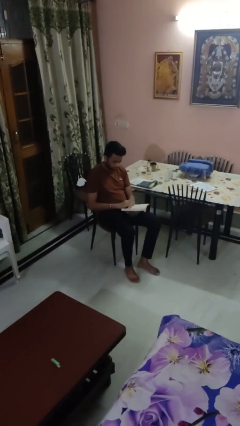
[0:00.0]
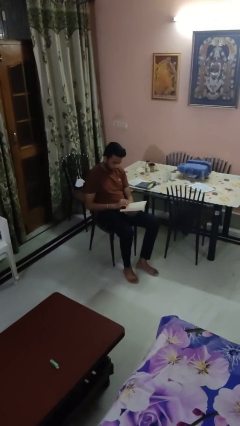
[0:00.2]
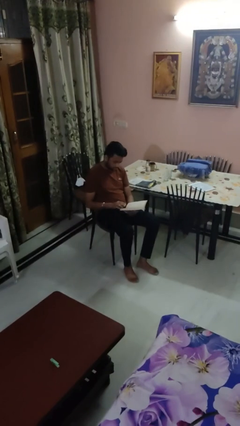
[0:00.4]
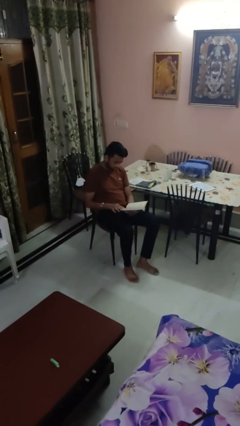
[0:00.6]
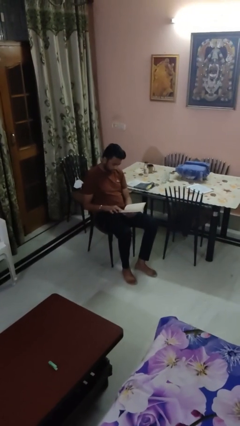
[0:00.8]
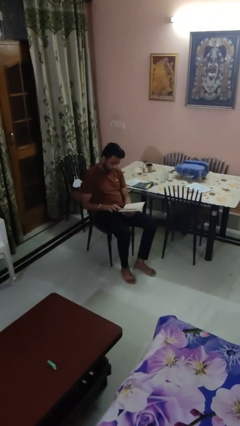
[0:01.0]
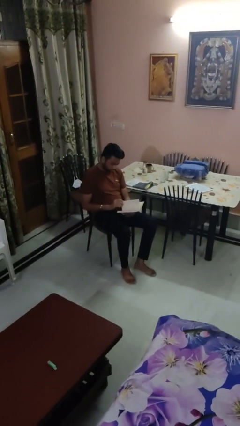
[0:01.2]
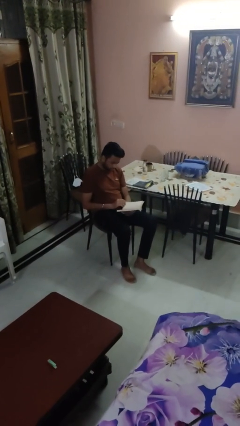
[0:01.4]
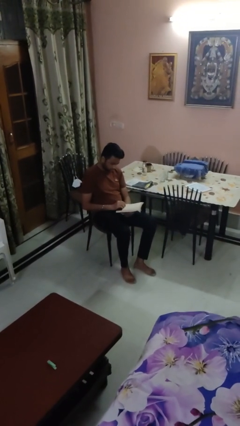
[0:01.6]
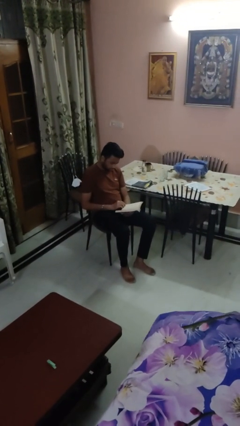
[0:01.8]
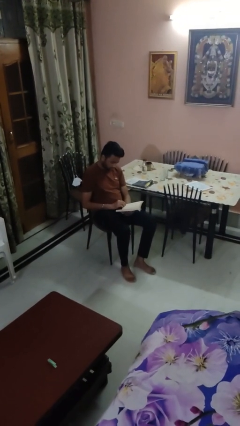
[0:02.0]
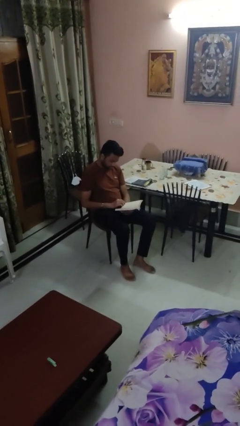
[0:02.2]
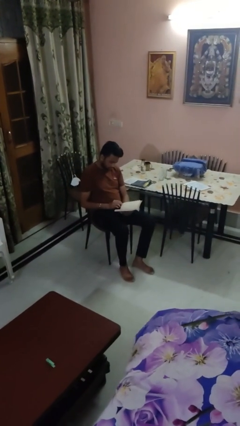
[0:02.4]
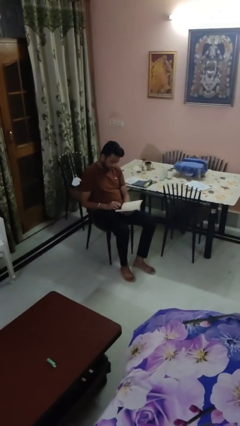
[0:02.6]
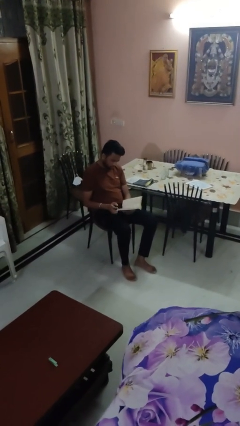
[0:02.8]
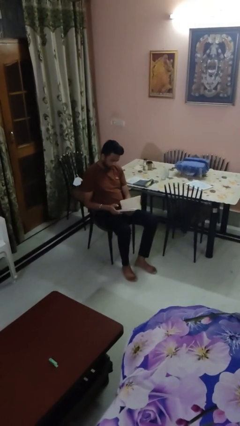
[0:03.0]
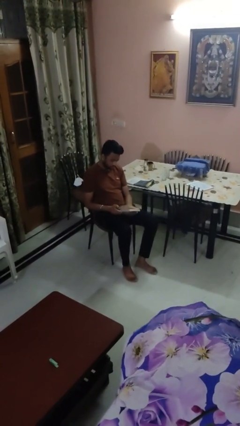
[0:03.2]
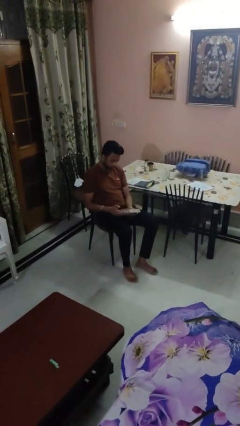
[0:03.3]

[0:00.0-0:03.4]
person reads book

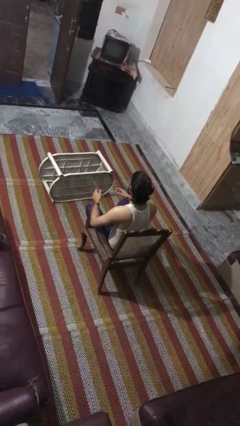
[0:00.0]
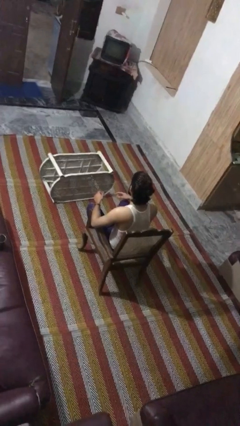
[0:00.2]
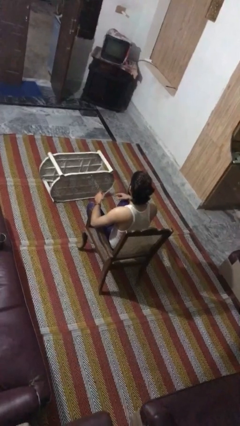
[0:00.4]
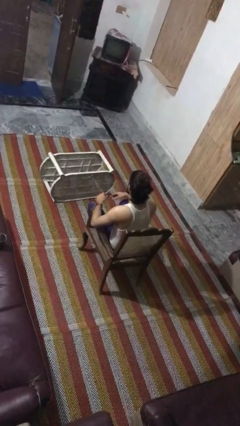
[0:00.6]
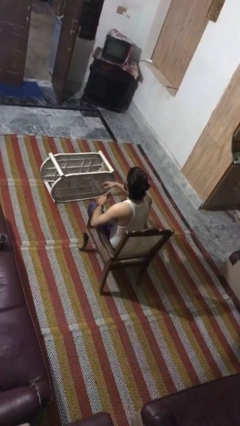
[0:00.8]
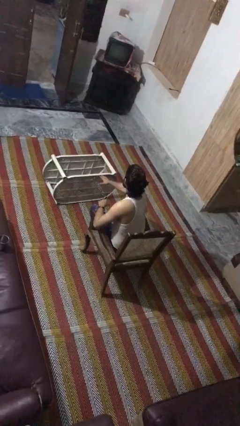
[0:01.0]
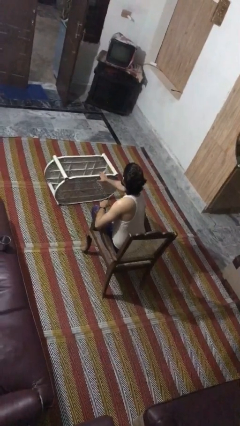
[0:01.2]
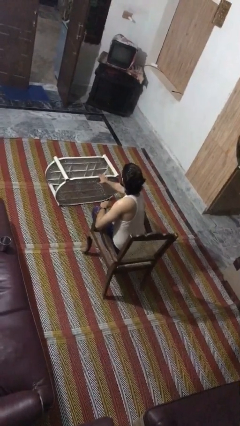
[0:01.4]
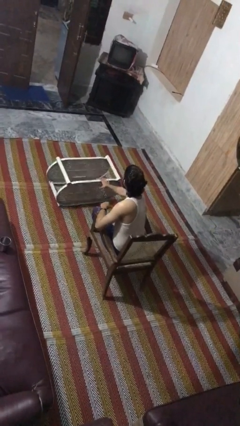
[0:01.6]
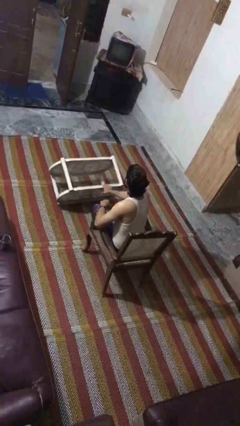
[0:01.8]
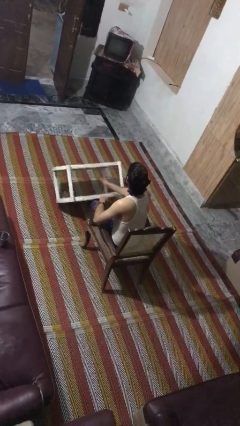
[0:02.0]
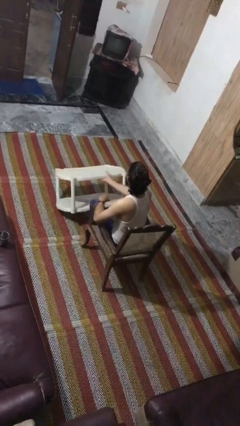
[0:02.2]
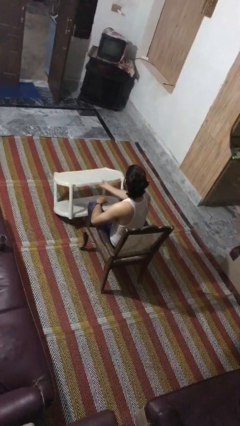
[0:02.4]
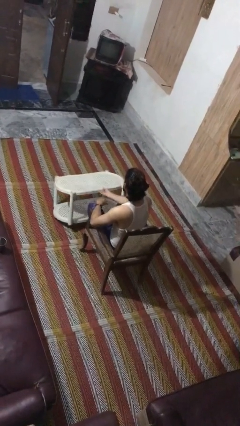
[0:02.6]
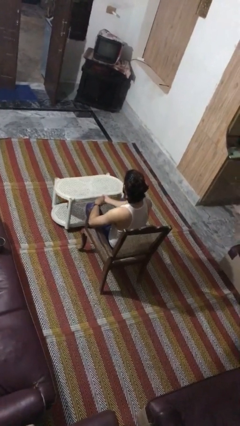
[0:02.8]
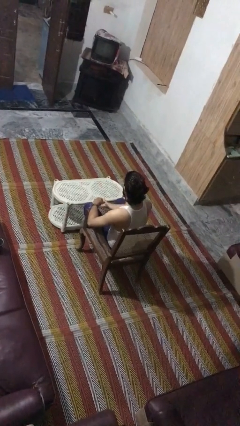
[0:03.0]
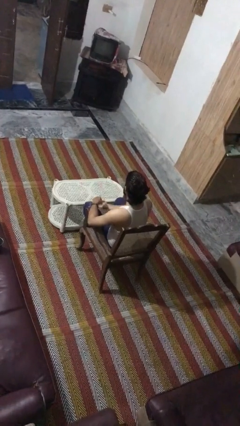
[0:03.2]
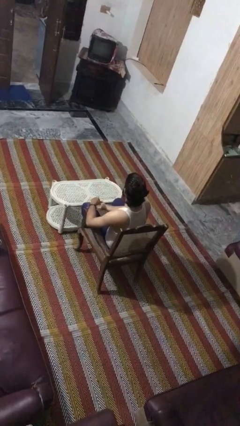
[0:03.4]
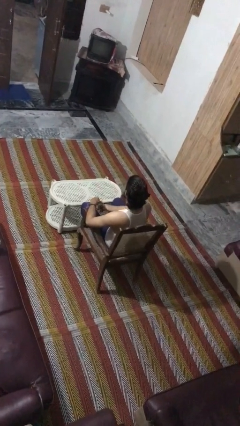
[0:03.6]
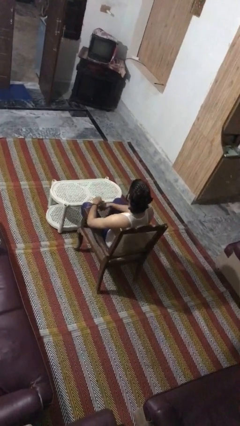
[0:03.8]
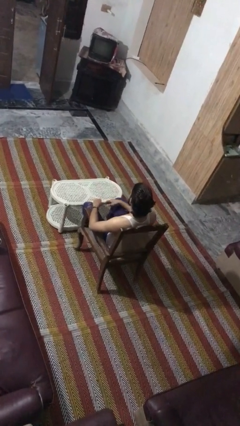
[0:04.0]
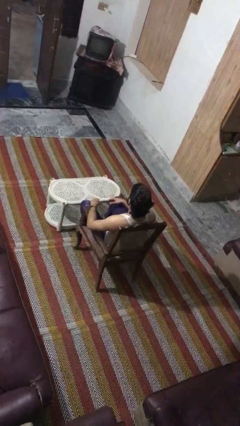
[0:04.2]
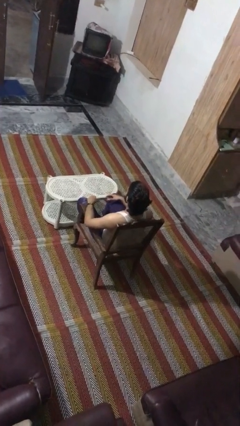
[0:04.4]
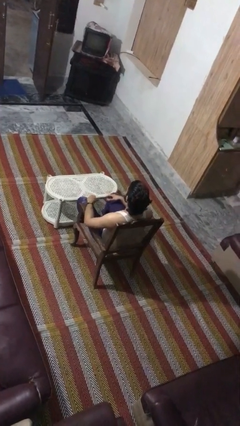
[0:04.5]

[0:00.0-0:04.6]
person sets upright furniture

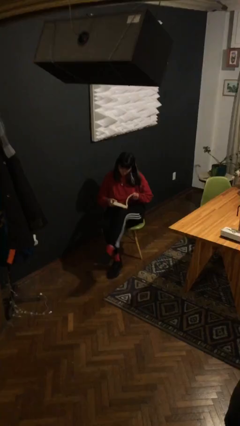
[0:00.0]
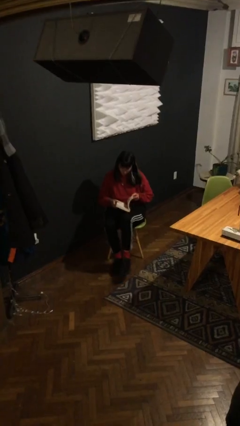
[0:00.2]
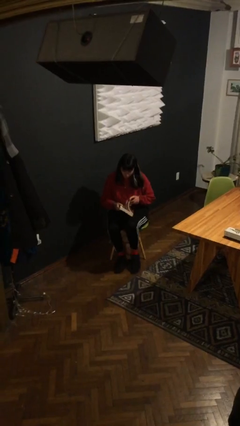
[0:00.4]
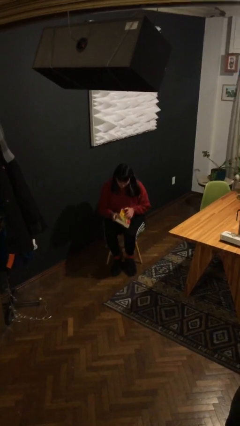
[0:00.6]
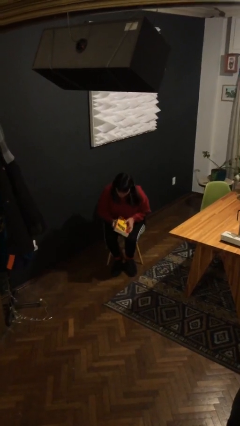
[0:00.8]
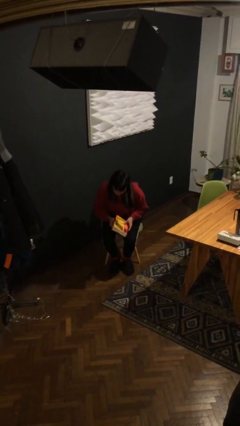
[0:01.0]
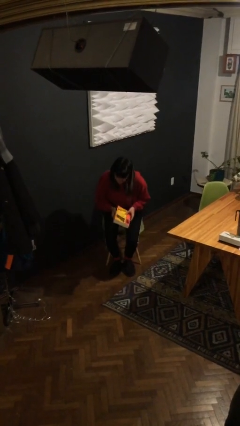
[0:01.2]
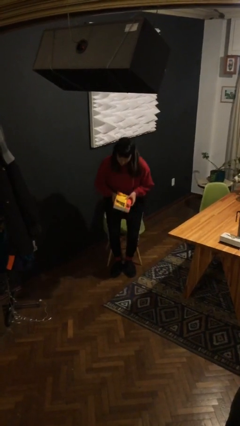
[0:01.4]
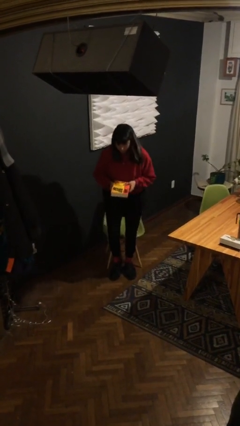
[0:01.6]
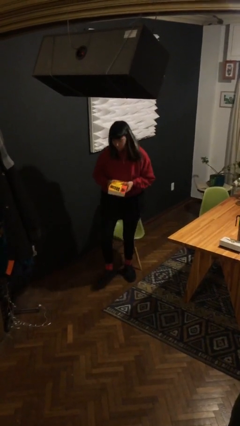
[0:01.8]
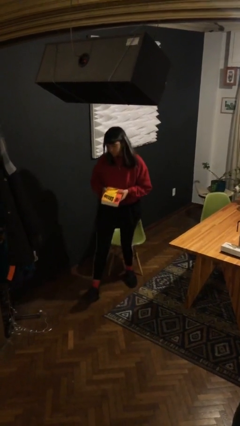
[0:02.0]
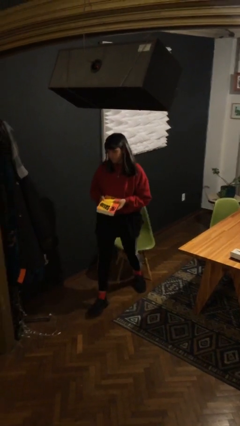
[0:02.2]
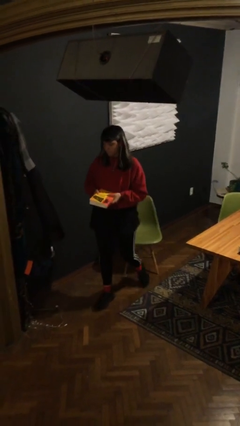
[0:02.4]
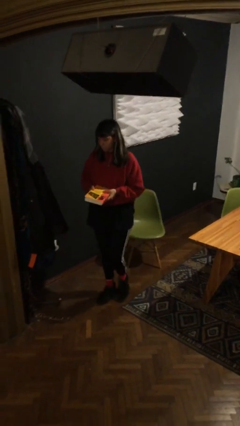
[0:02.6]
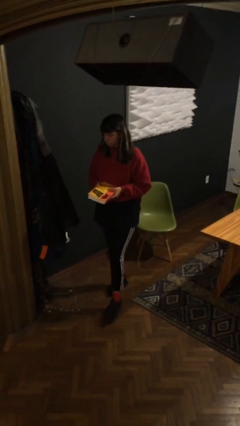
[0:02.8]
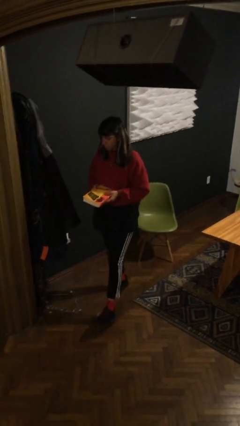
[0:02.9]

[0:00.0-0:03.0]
person stands up

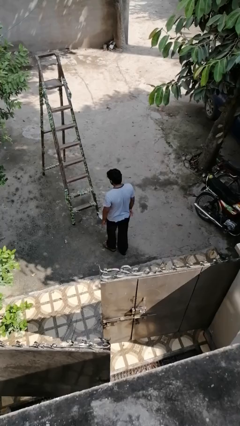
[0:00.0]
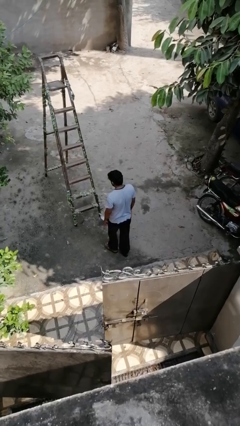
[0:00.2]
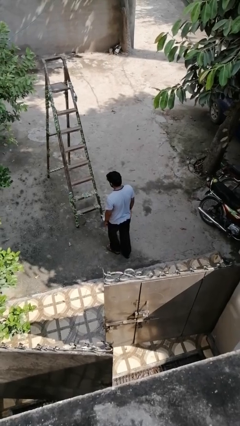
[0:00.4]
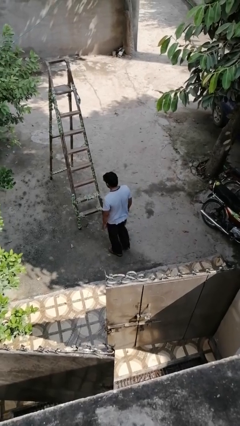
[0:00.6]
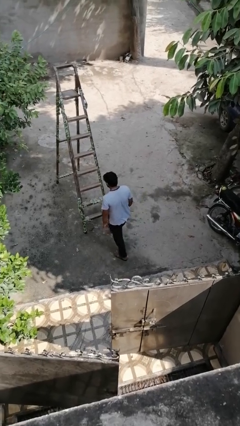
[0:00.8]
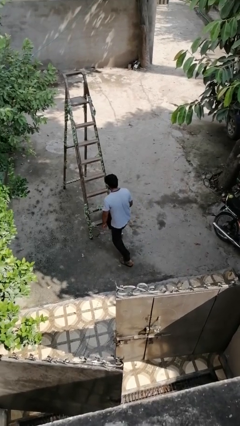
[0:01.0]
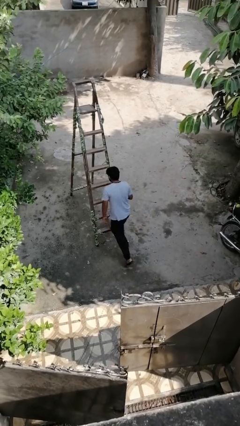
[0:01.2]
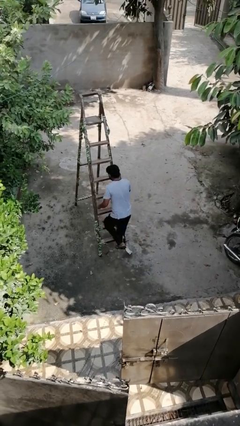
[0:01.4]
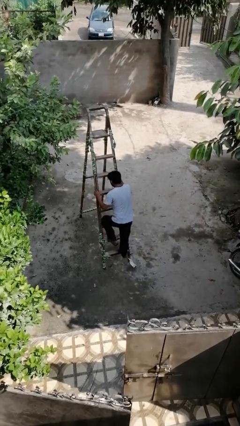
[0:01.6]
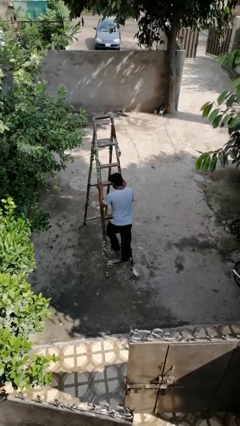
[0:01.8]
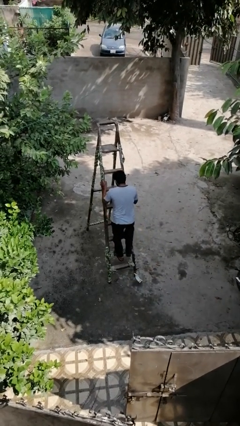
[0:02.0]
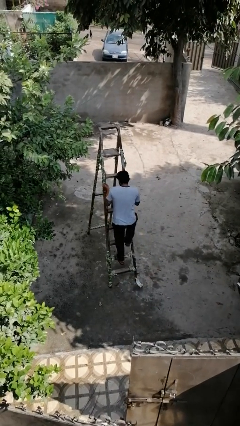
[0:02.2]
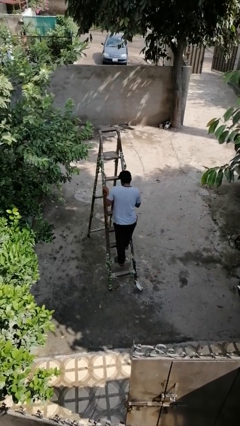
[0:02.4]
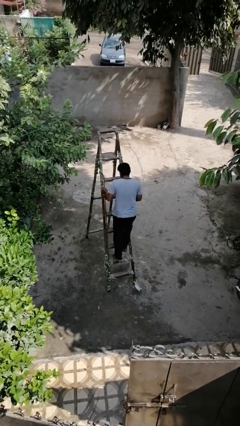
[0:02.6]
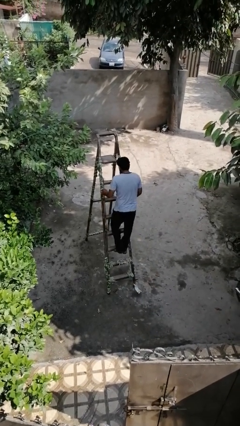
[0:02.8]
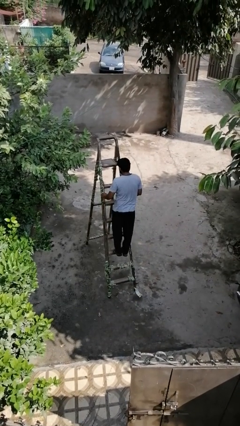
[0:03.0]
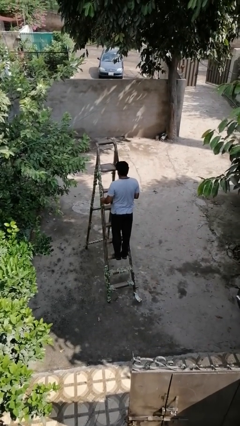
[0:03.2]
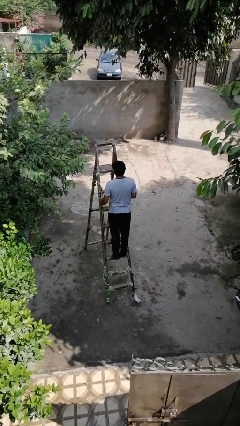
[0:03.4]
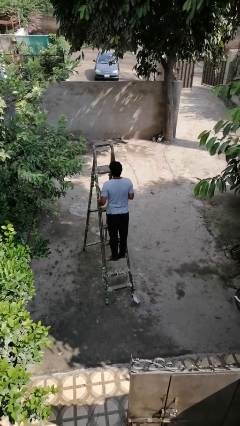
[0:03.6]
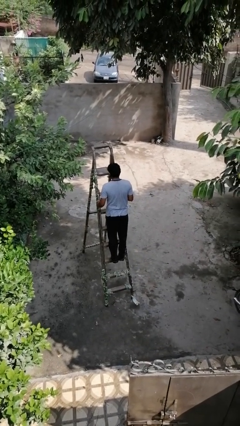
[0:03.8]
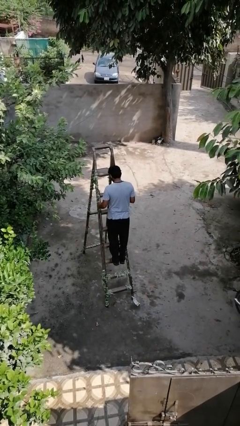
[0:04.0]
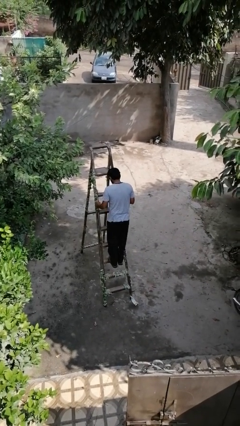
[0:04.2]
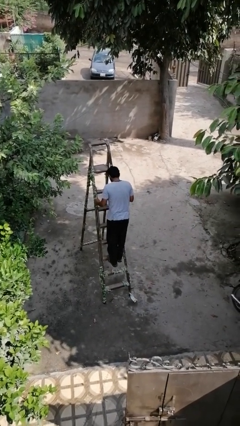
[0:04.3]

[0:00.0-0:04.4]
person climbs up ladder

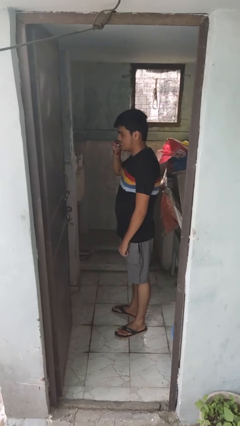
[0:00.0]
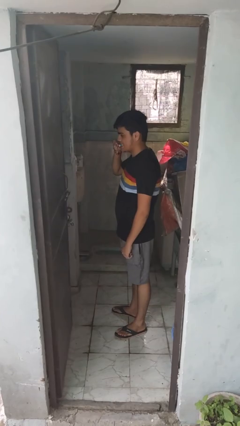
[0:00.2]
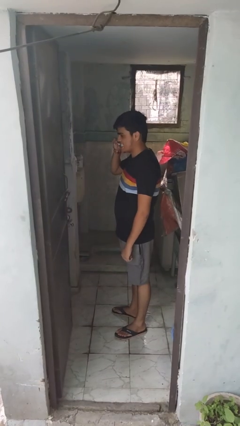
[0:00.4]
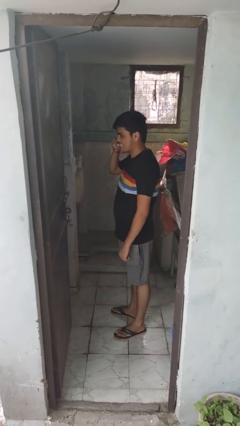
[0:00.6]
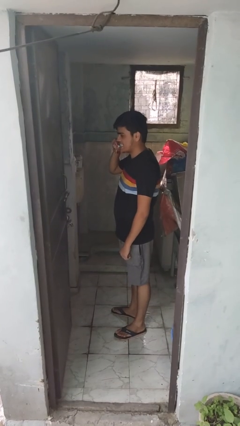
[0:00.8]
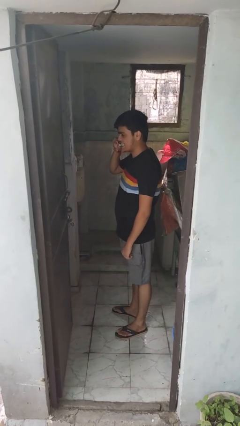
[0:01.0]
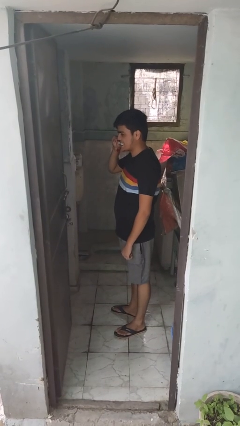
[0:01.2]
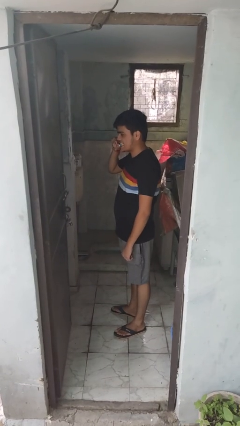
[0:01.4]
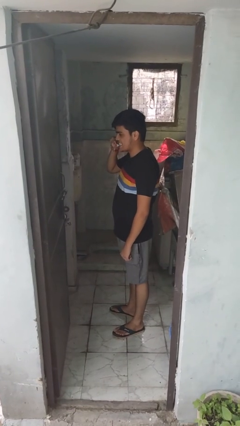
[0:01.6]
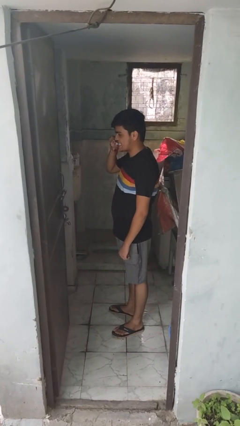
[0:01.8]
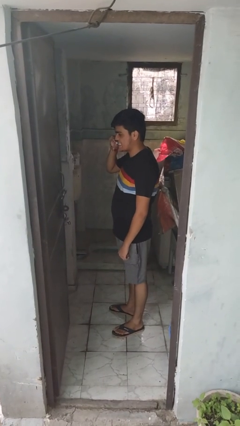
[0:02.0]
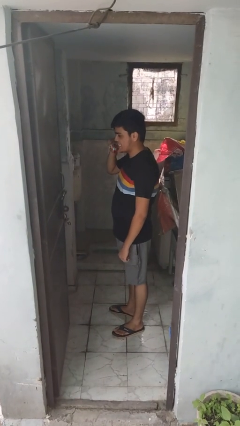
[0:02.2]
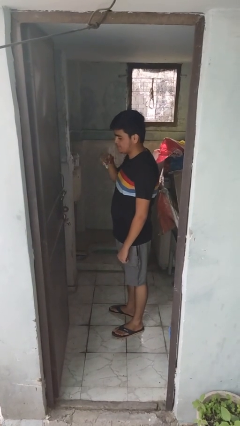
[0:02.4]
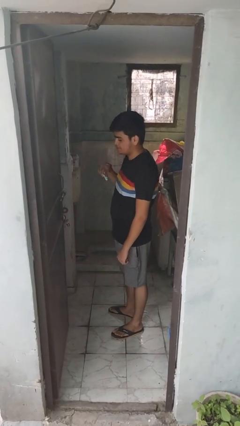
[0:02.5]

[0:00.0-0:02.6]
person brushes teeth
